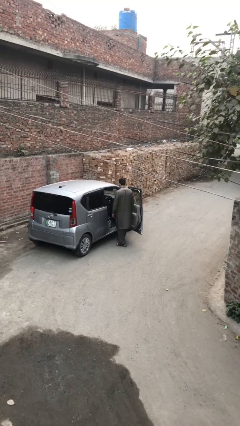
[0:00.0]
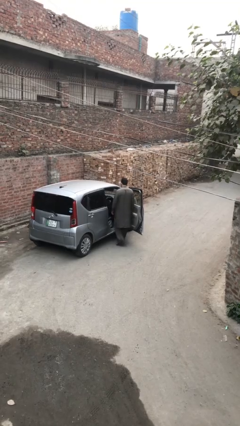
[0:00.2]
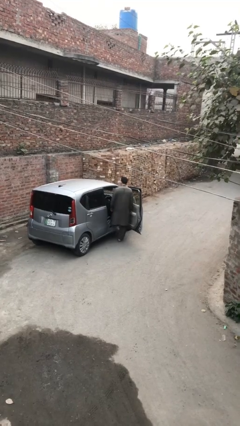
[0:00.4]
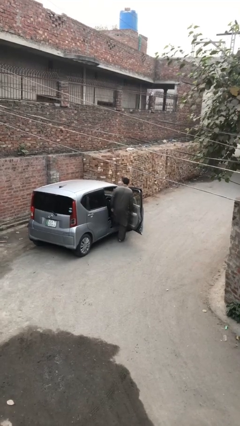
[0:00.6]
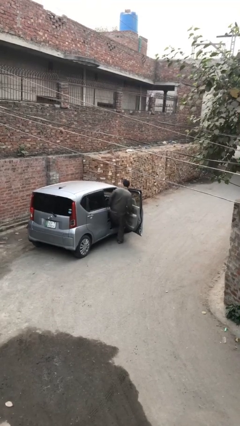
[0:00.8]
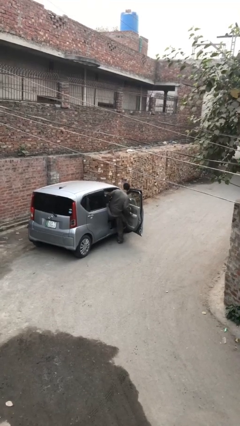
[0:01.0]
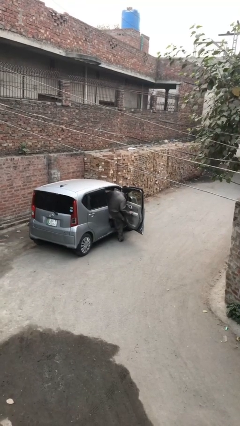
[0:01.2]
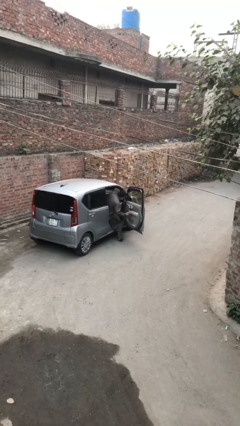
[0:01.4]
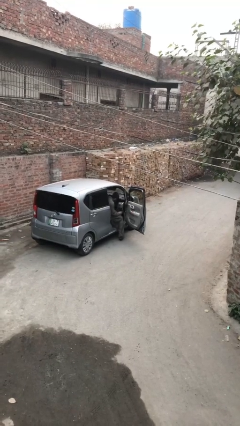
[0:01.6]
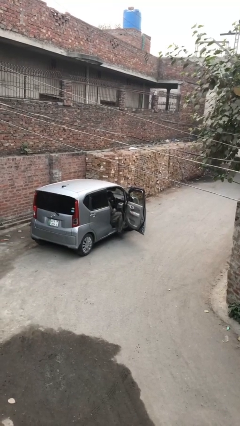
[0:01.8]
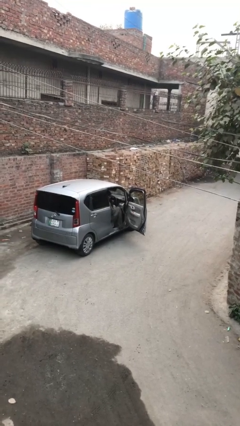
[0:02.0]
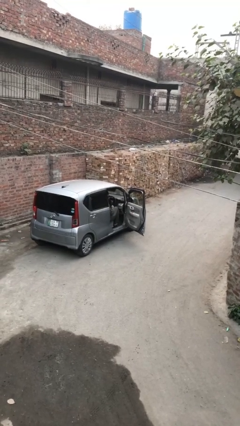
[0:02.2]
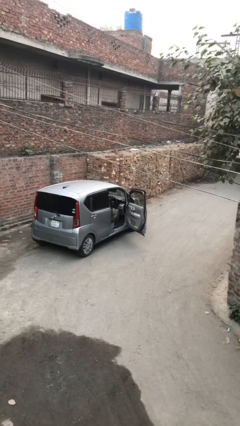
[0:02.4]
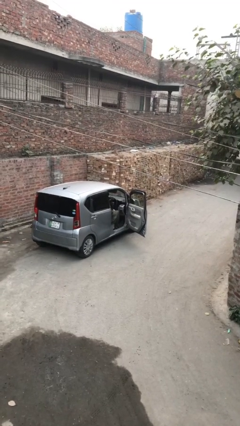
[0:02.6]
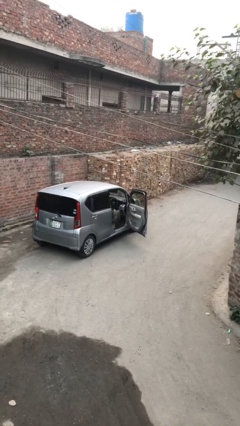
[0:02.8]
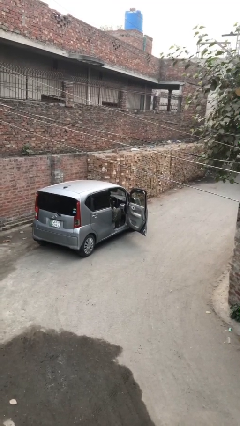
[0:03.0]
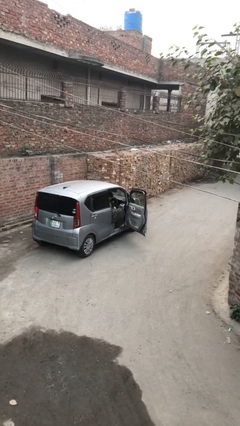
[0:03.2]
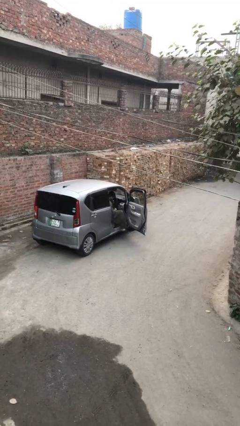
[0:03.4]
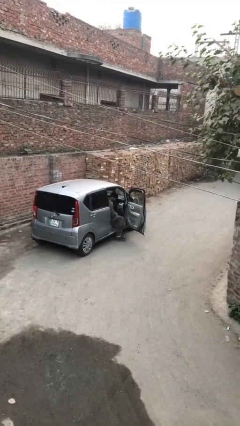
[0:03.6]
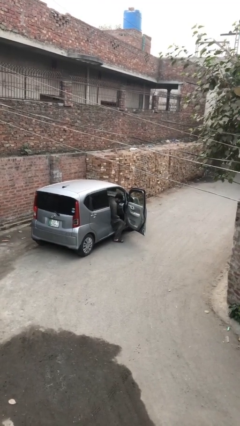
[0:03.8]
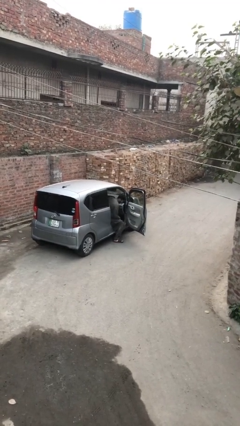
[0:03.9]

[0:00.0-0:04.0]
person enters car

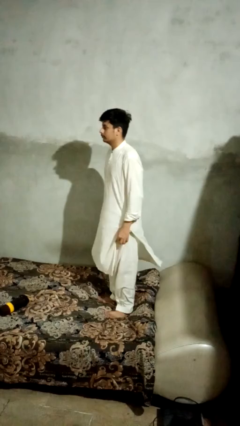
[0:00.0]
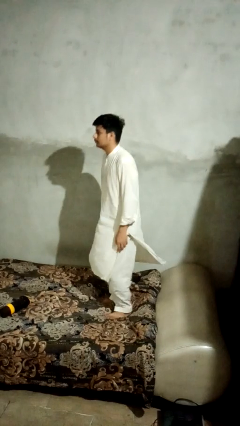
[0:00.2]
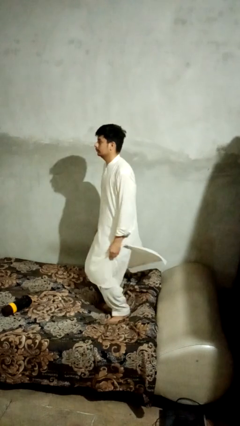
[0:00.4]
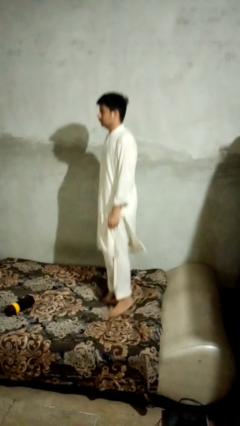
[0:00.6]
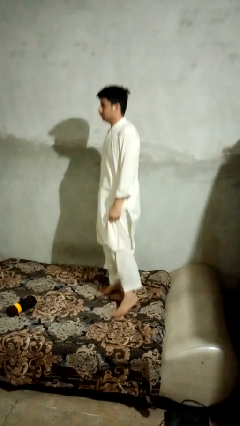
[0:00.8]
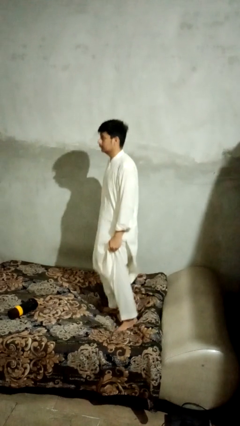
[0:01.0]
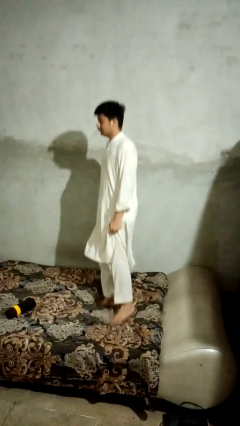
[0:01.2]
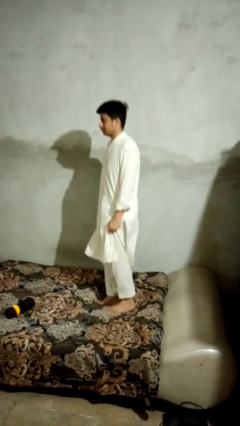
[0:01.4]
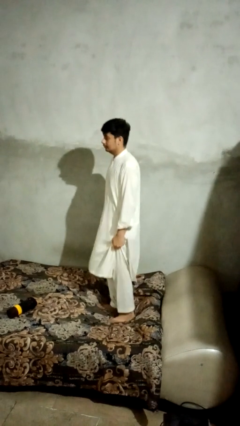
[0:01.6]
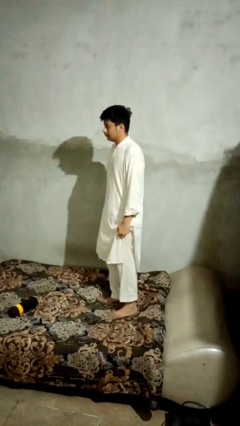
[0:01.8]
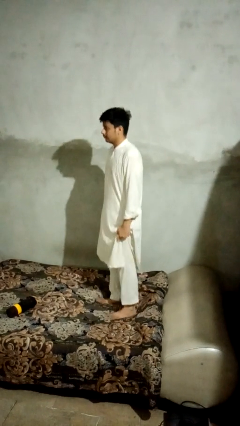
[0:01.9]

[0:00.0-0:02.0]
person jumps on bed

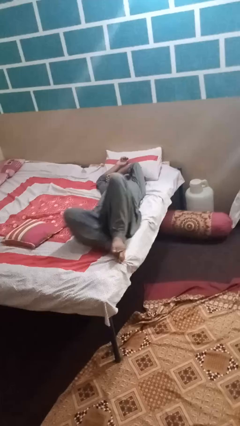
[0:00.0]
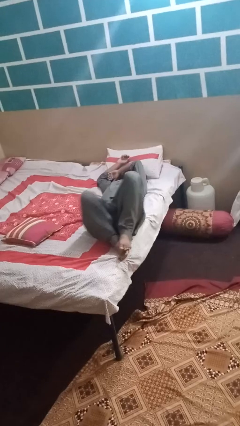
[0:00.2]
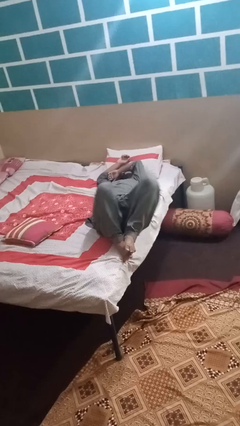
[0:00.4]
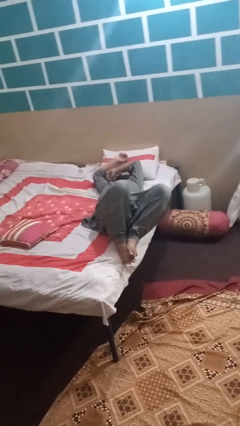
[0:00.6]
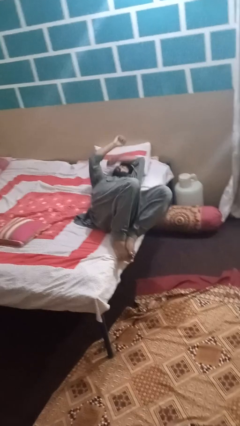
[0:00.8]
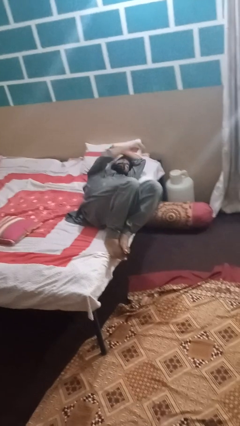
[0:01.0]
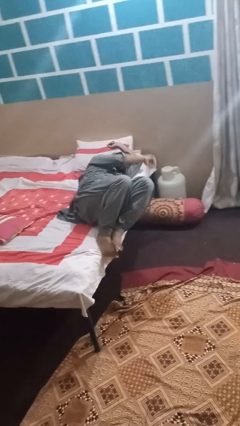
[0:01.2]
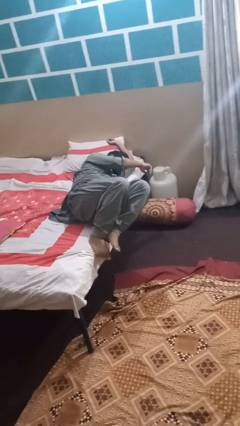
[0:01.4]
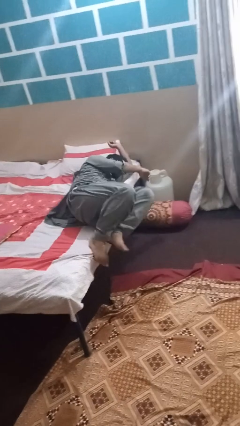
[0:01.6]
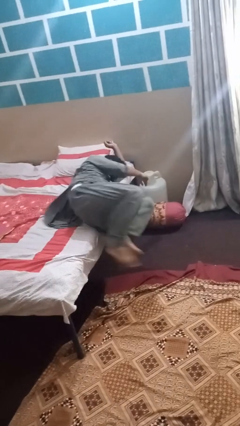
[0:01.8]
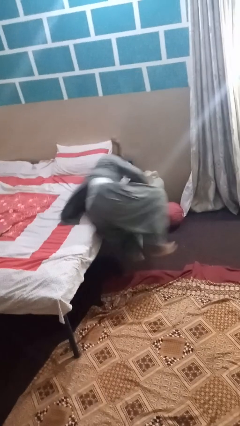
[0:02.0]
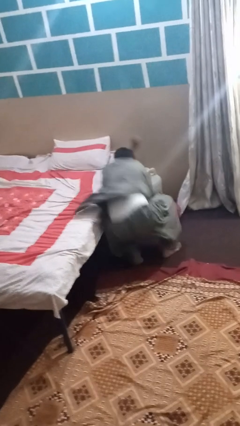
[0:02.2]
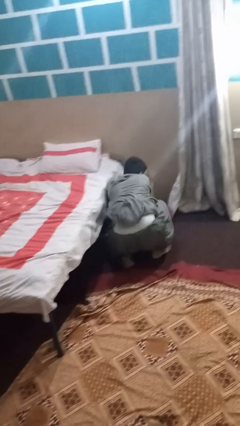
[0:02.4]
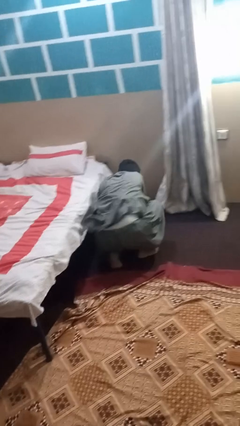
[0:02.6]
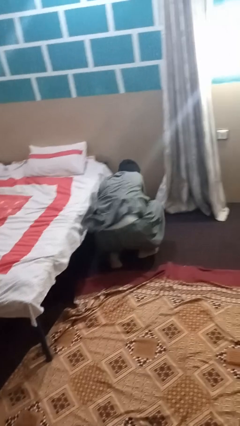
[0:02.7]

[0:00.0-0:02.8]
person falls from bed

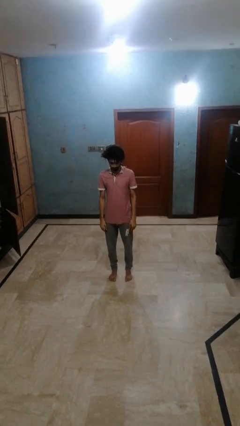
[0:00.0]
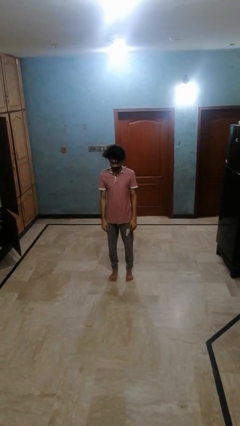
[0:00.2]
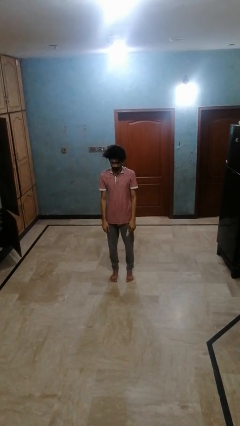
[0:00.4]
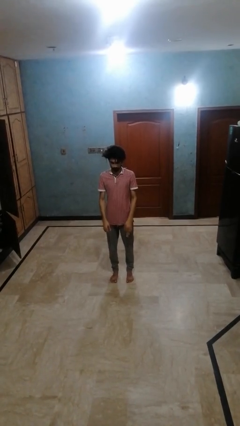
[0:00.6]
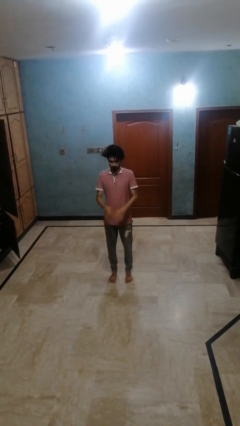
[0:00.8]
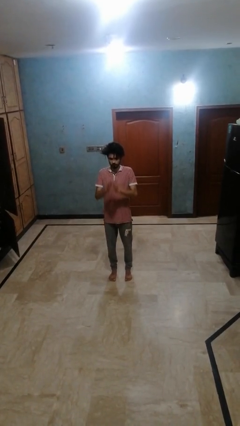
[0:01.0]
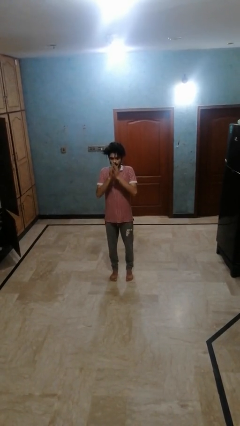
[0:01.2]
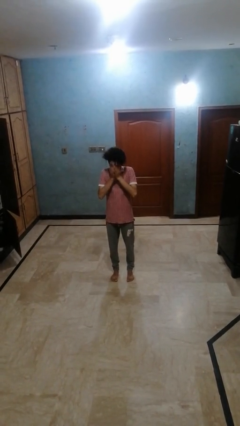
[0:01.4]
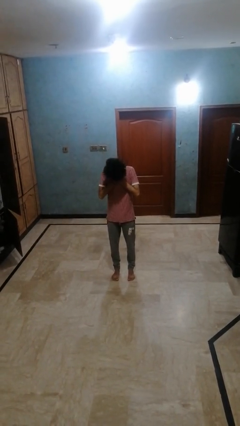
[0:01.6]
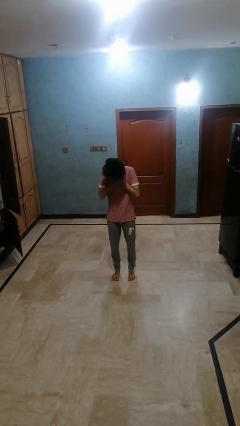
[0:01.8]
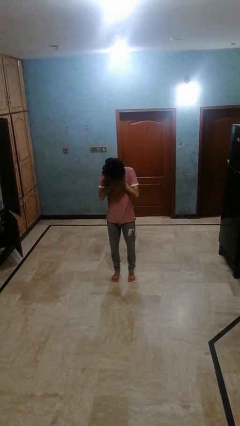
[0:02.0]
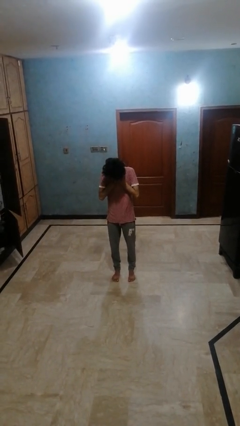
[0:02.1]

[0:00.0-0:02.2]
person sneezes into hand

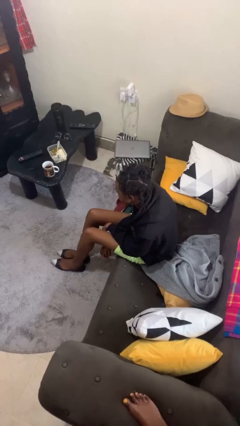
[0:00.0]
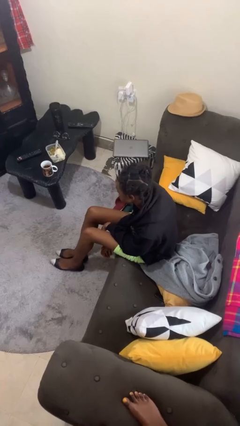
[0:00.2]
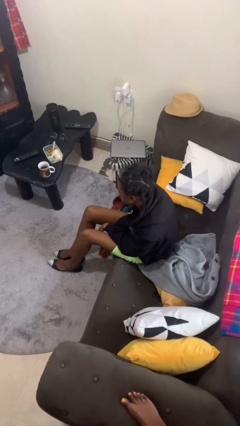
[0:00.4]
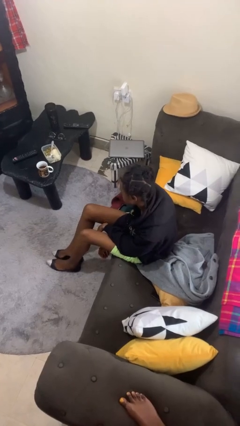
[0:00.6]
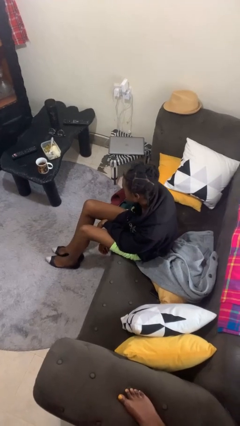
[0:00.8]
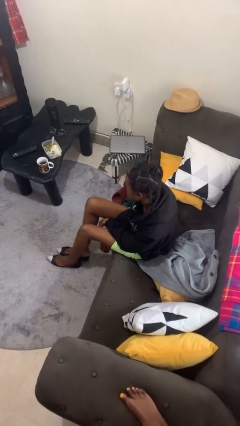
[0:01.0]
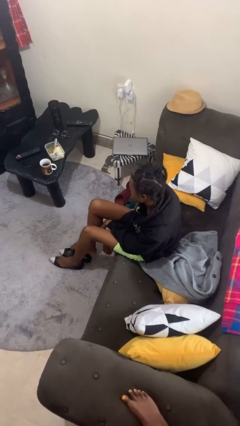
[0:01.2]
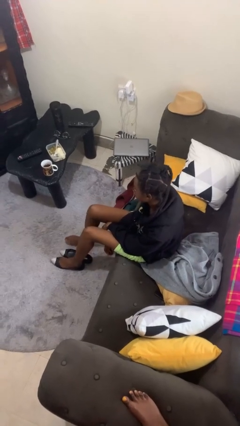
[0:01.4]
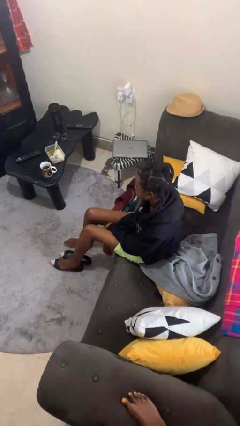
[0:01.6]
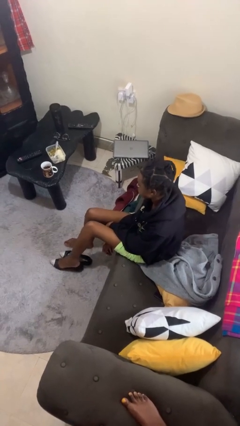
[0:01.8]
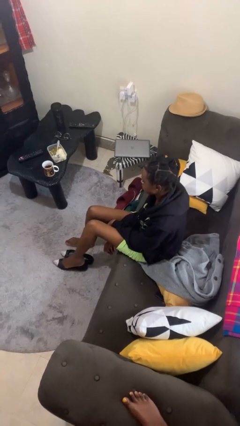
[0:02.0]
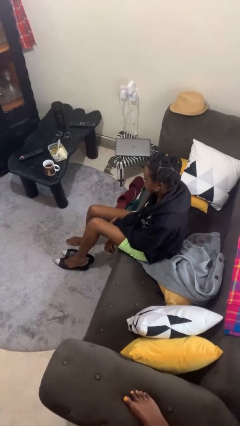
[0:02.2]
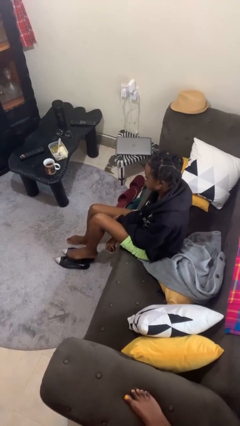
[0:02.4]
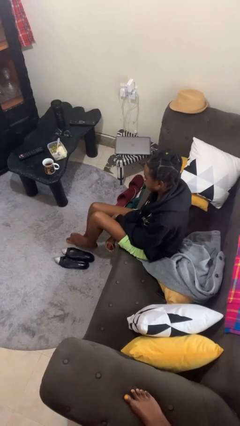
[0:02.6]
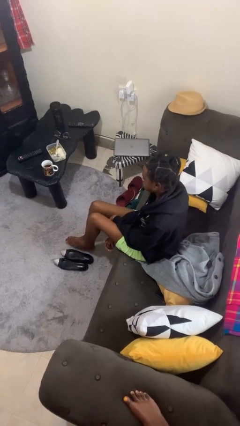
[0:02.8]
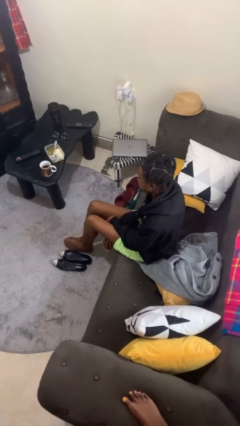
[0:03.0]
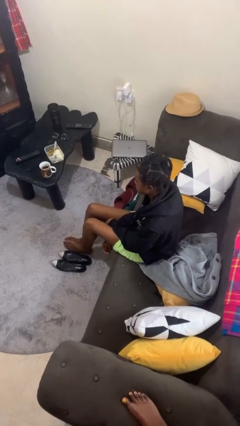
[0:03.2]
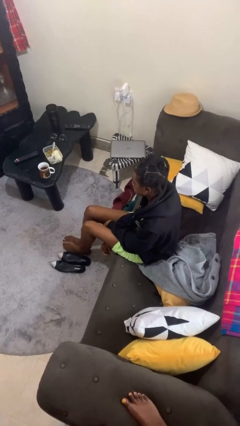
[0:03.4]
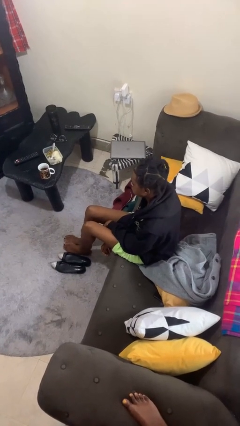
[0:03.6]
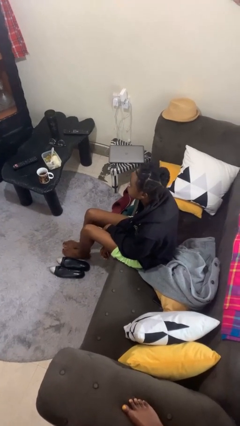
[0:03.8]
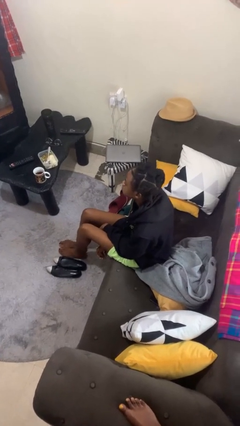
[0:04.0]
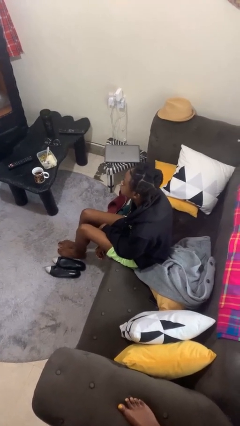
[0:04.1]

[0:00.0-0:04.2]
person takes off shoes

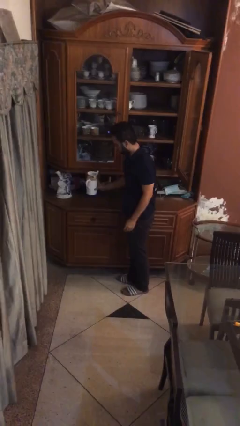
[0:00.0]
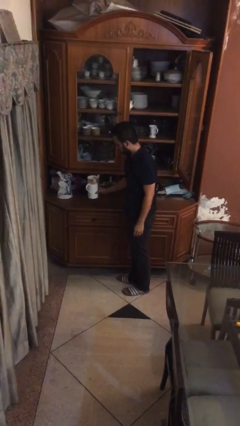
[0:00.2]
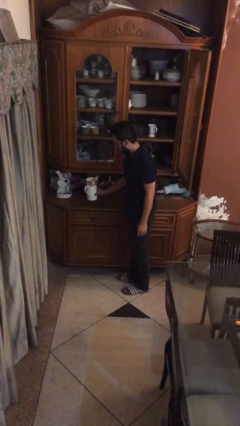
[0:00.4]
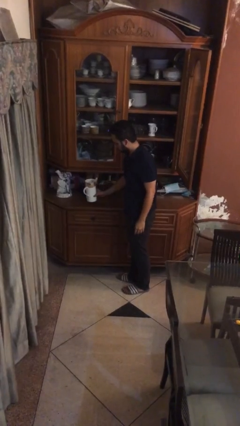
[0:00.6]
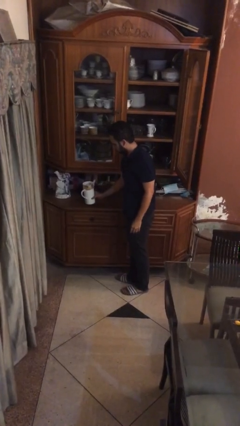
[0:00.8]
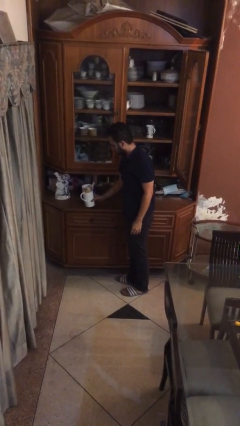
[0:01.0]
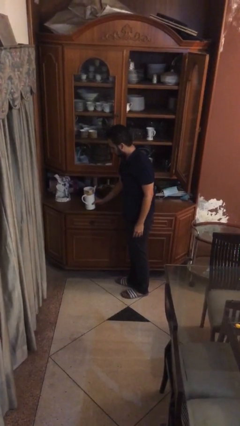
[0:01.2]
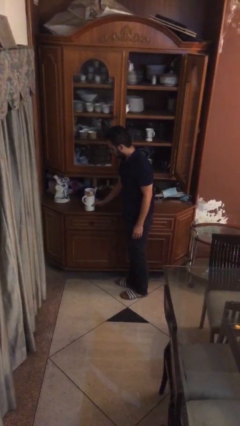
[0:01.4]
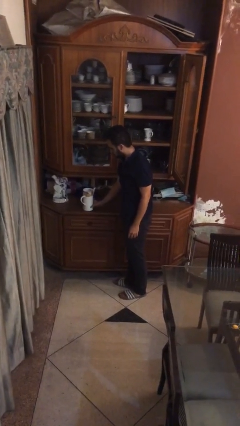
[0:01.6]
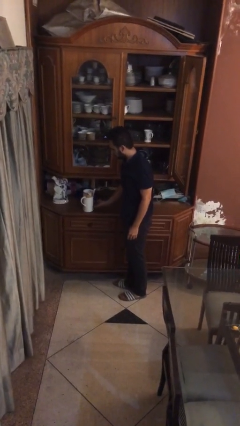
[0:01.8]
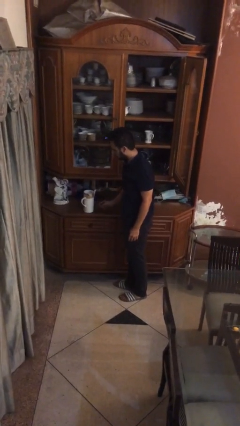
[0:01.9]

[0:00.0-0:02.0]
person puts down object on table

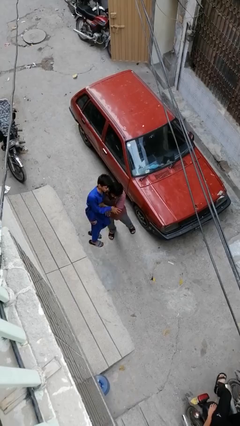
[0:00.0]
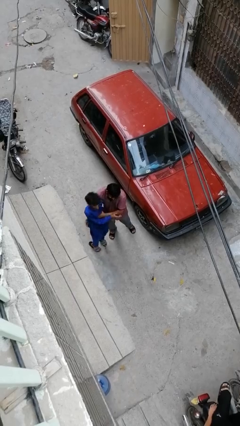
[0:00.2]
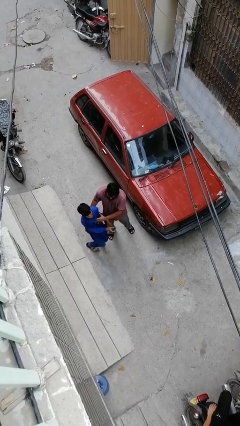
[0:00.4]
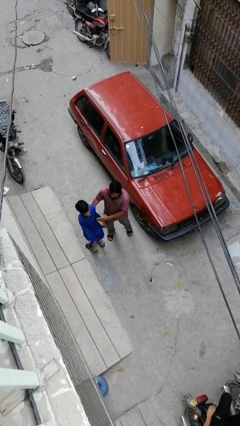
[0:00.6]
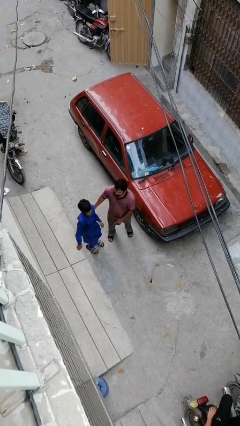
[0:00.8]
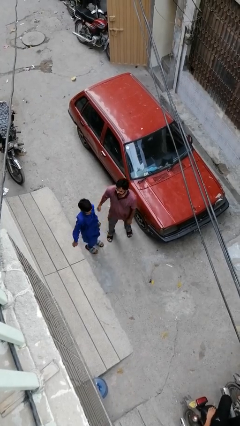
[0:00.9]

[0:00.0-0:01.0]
person puts down person
